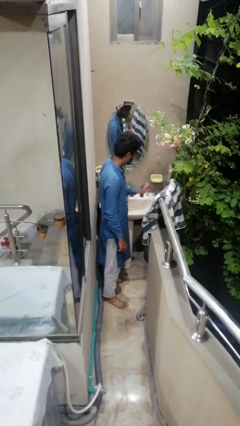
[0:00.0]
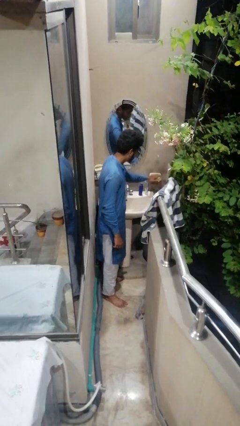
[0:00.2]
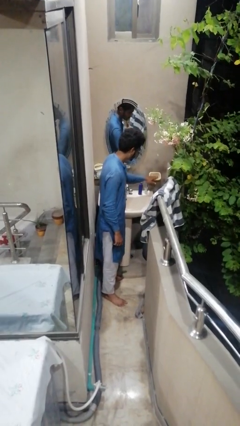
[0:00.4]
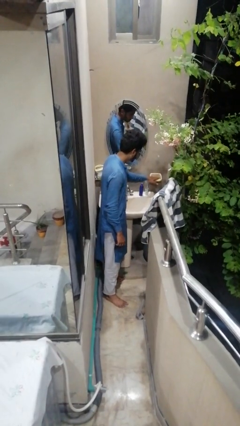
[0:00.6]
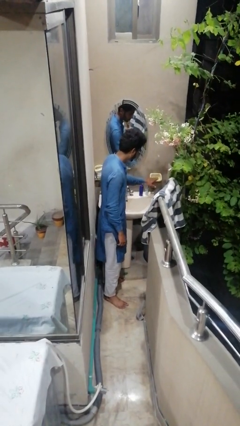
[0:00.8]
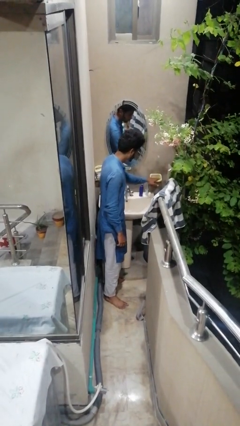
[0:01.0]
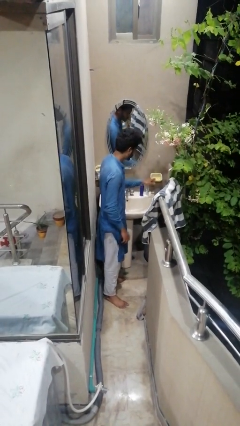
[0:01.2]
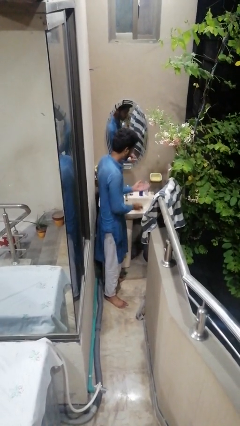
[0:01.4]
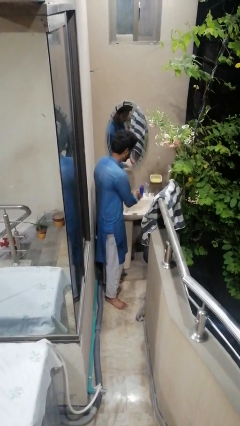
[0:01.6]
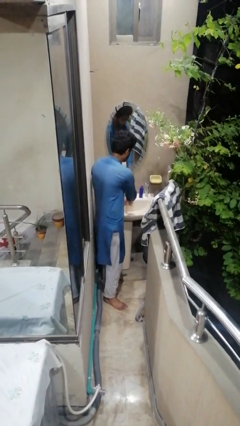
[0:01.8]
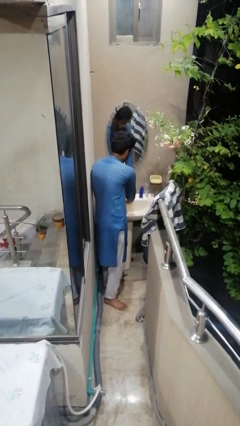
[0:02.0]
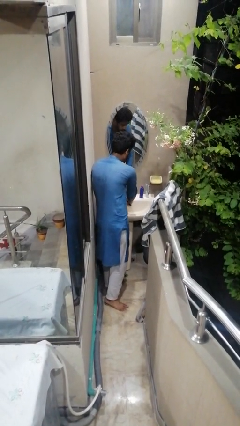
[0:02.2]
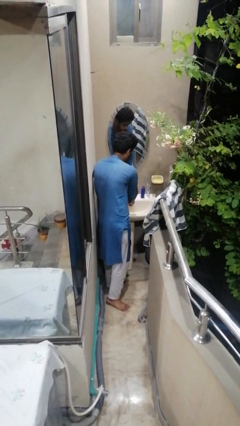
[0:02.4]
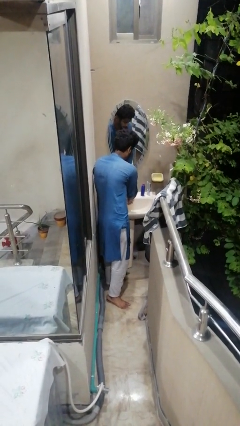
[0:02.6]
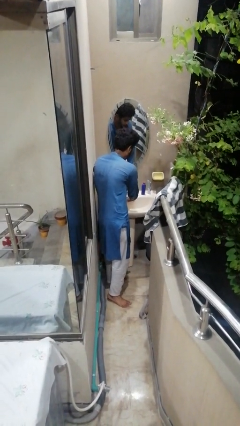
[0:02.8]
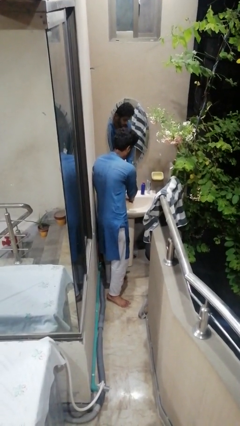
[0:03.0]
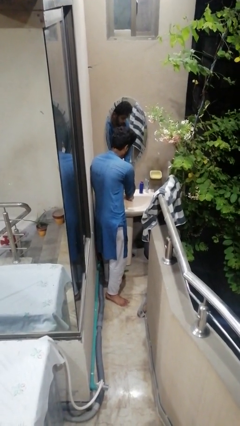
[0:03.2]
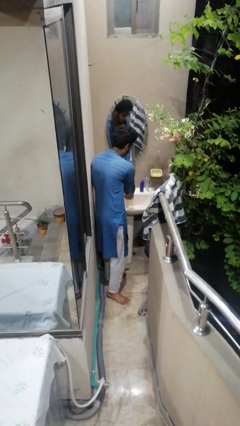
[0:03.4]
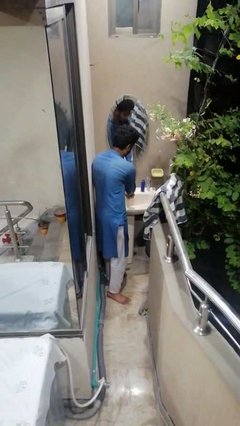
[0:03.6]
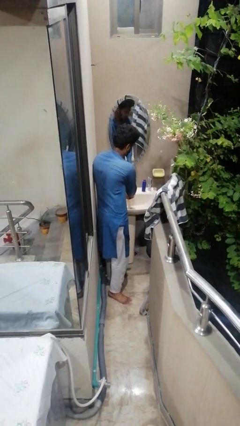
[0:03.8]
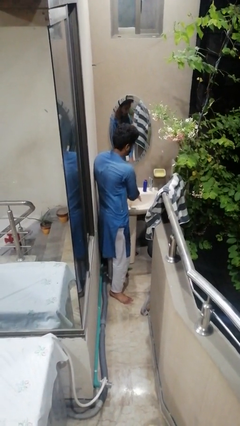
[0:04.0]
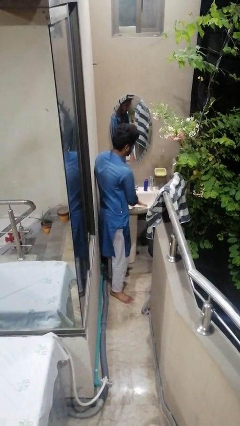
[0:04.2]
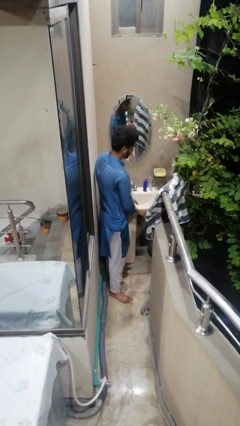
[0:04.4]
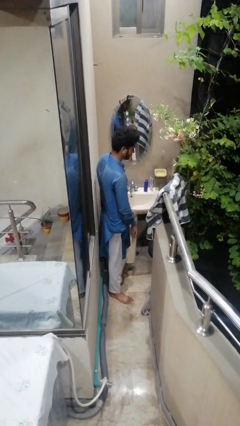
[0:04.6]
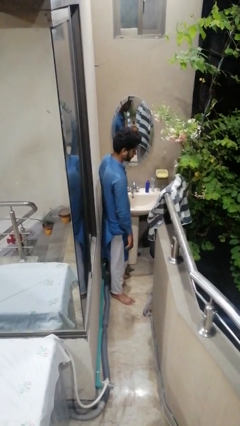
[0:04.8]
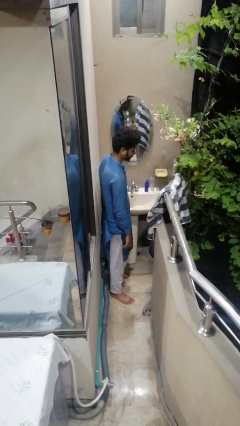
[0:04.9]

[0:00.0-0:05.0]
person washes hands

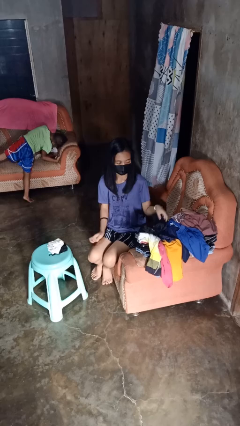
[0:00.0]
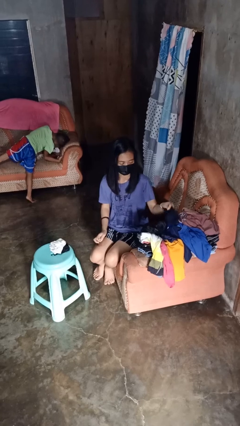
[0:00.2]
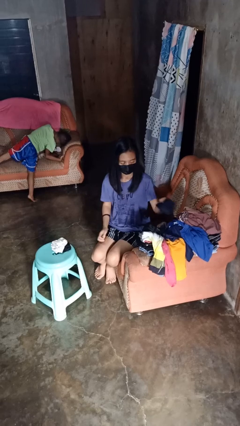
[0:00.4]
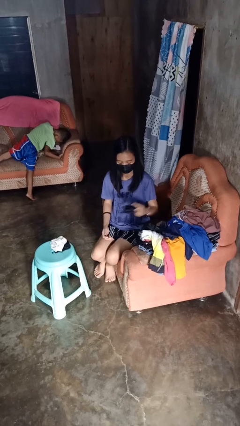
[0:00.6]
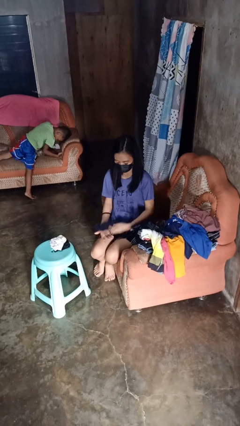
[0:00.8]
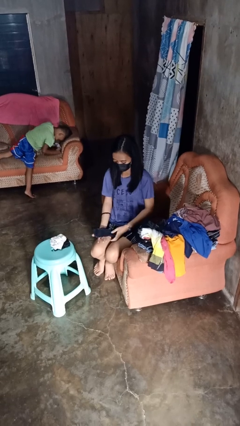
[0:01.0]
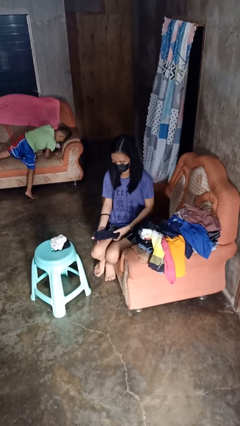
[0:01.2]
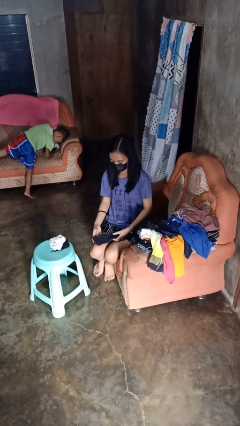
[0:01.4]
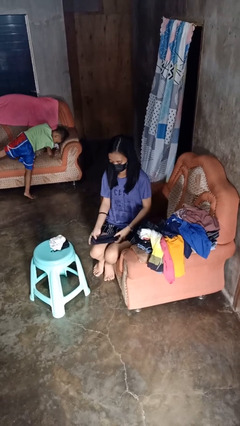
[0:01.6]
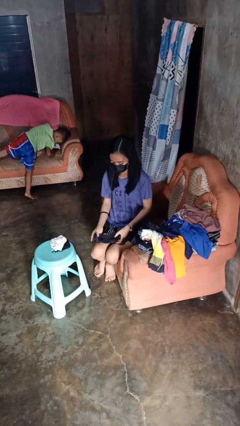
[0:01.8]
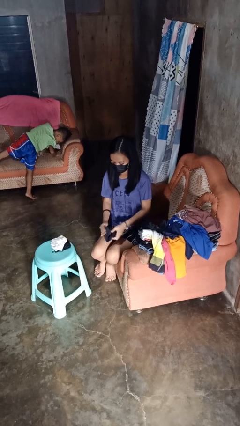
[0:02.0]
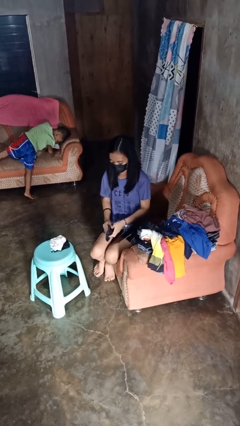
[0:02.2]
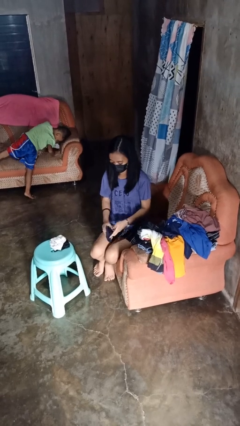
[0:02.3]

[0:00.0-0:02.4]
person folds socks

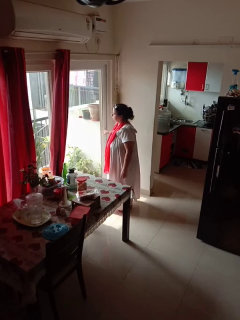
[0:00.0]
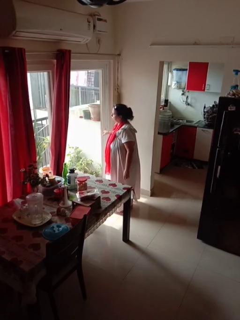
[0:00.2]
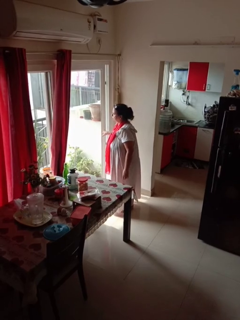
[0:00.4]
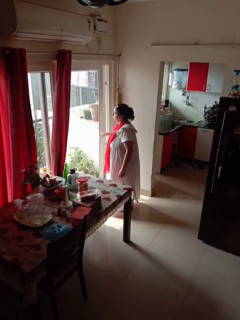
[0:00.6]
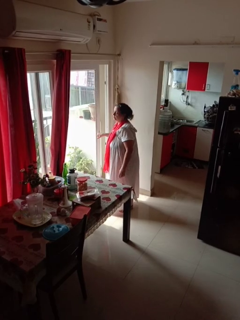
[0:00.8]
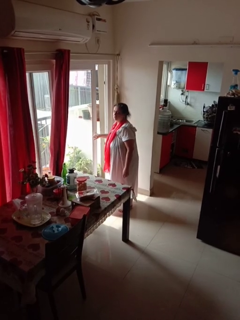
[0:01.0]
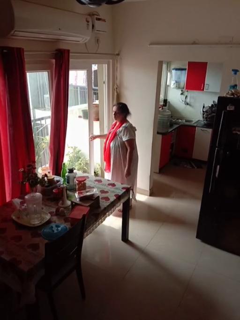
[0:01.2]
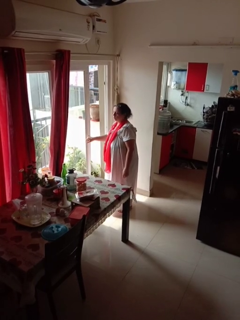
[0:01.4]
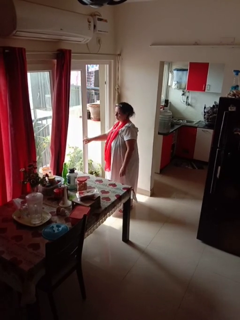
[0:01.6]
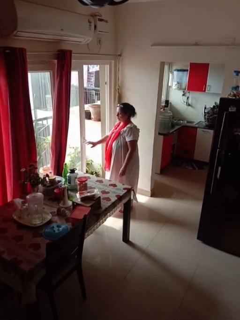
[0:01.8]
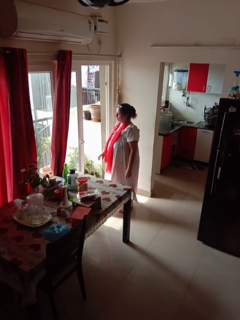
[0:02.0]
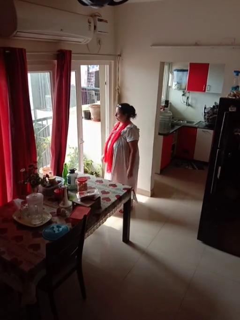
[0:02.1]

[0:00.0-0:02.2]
person opens sliding door

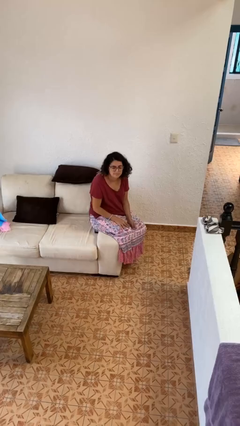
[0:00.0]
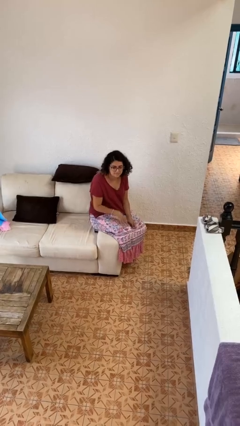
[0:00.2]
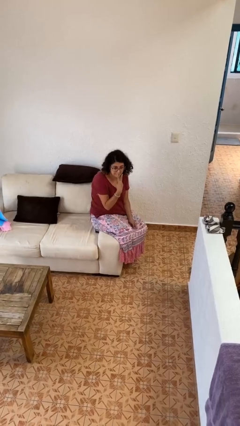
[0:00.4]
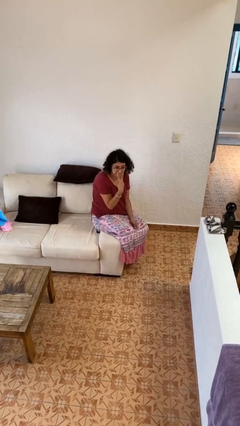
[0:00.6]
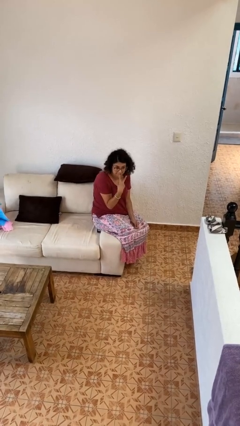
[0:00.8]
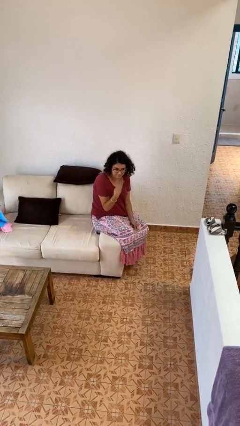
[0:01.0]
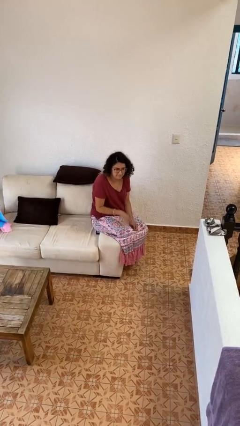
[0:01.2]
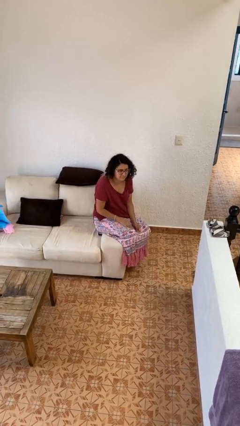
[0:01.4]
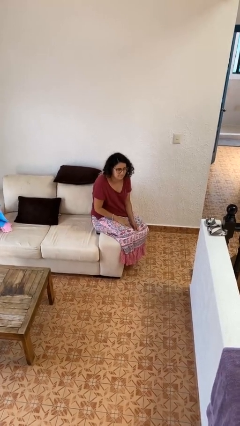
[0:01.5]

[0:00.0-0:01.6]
person gestures watch closely

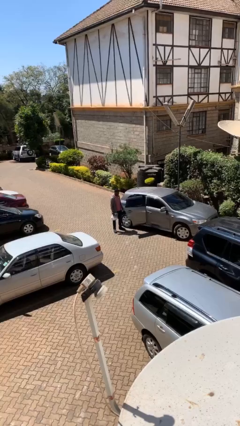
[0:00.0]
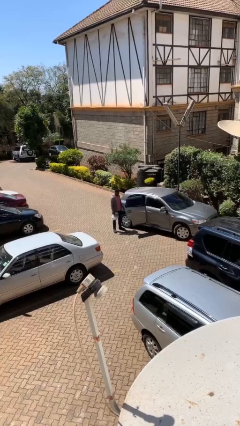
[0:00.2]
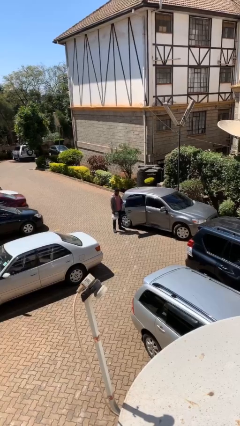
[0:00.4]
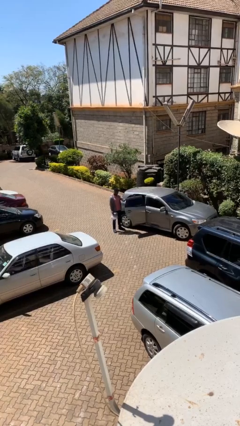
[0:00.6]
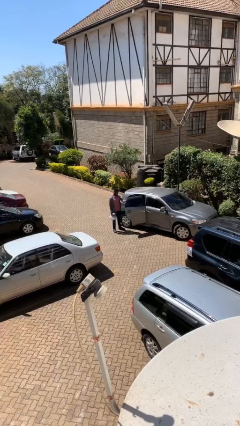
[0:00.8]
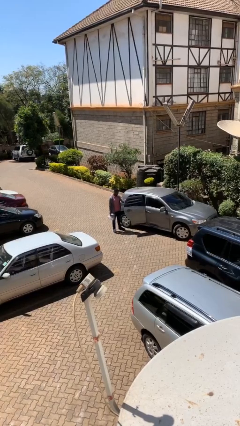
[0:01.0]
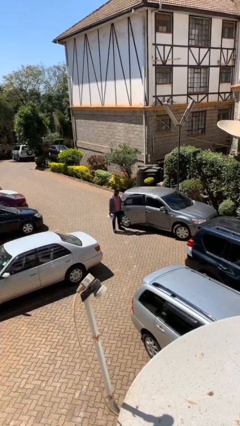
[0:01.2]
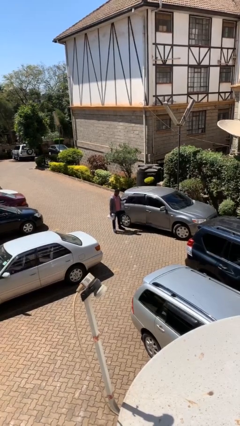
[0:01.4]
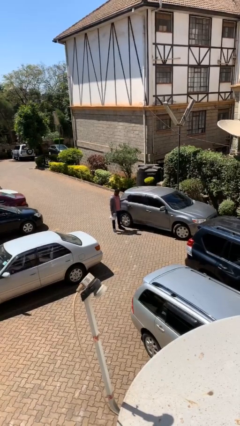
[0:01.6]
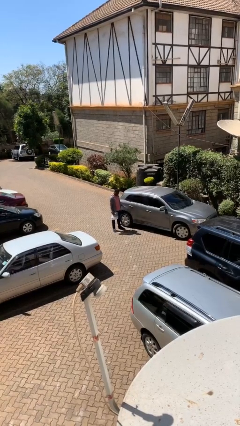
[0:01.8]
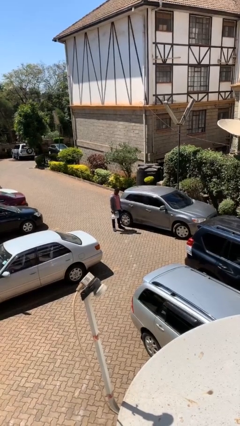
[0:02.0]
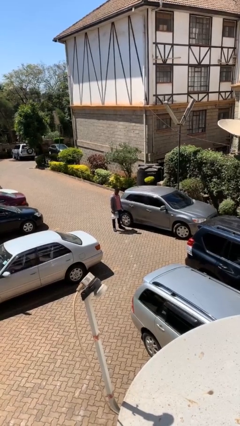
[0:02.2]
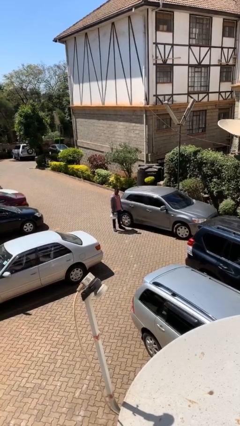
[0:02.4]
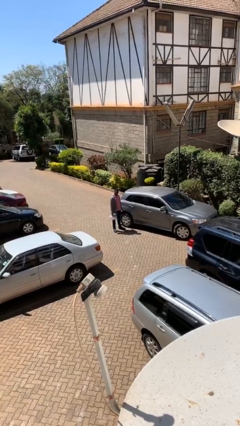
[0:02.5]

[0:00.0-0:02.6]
person closes car door

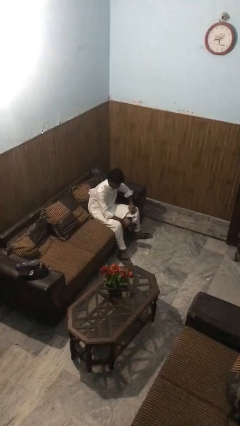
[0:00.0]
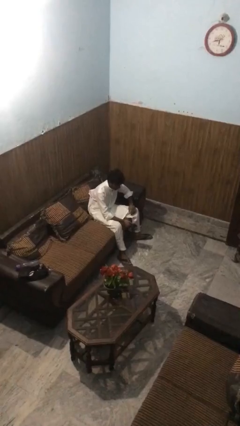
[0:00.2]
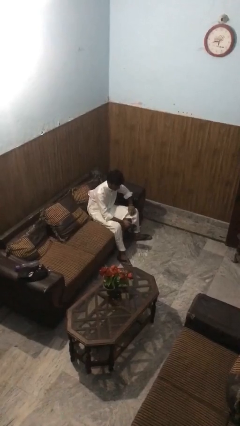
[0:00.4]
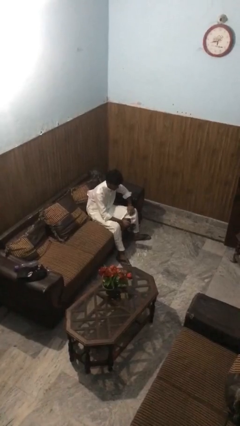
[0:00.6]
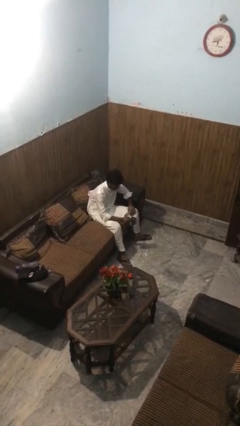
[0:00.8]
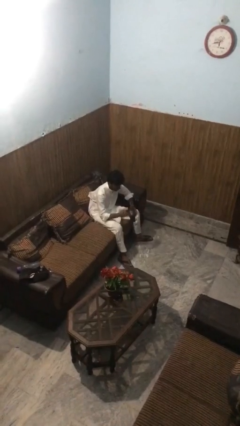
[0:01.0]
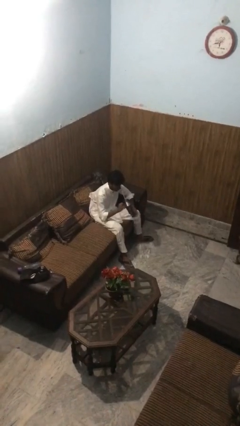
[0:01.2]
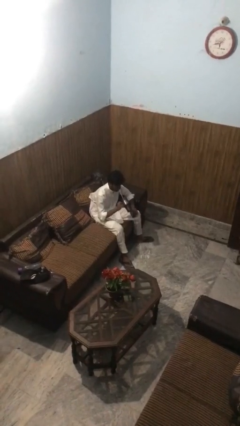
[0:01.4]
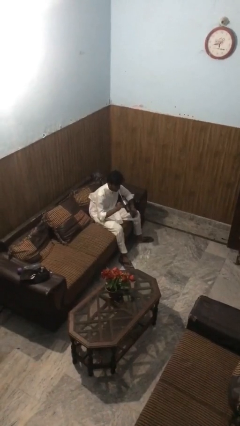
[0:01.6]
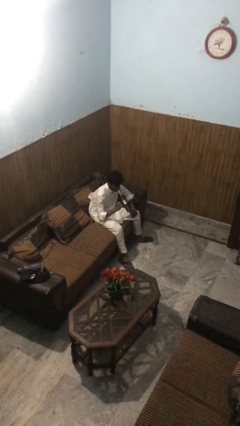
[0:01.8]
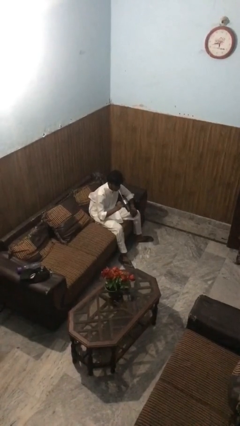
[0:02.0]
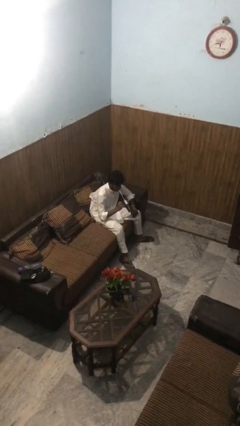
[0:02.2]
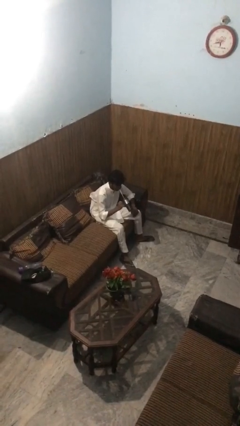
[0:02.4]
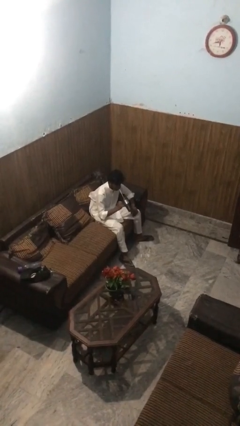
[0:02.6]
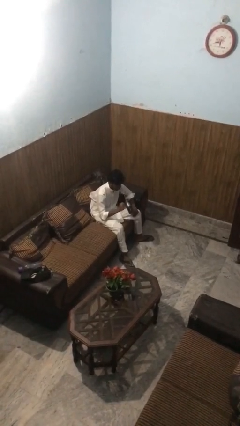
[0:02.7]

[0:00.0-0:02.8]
person drinks from straw

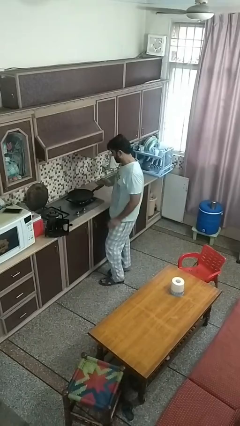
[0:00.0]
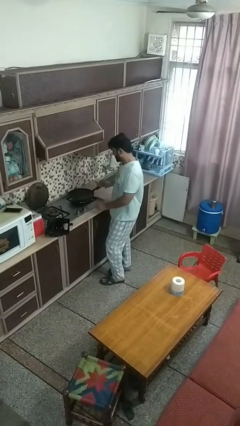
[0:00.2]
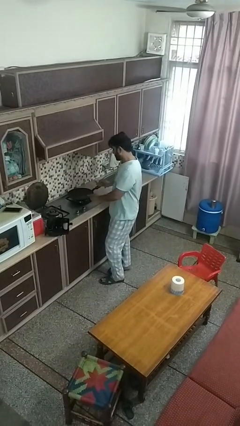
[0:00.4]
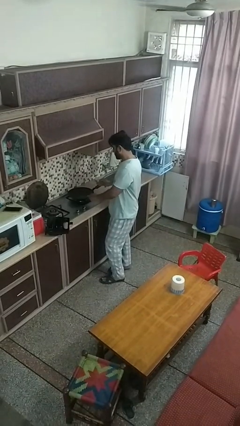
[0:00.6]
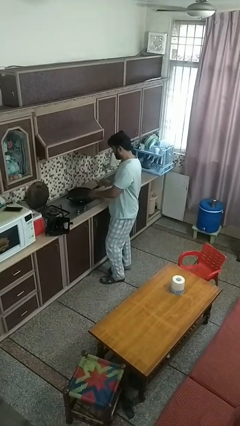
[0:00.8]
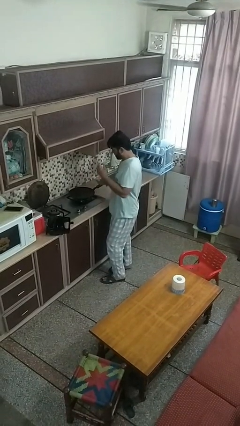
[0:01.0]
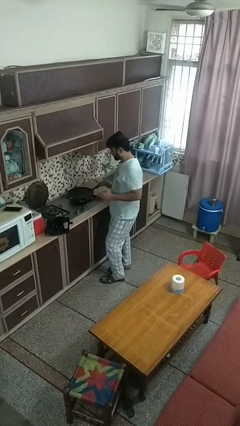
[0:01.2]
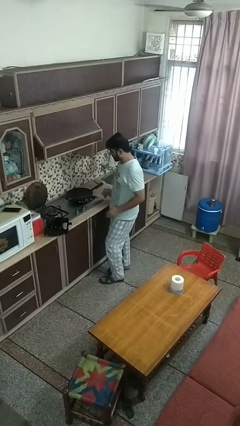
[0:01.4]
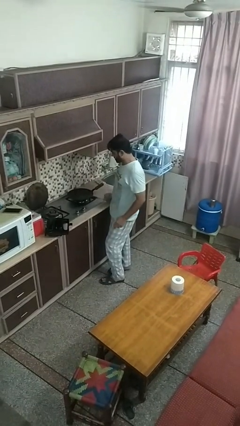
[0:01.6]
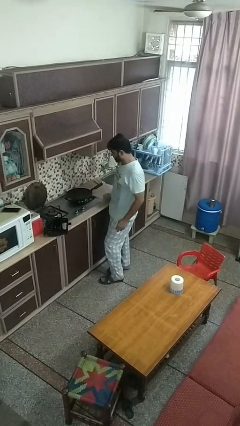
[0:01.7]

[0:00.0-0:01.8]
person burns hand
